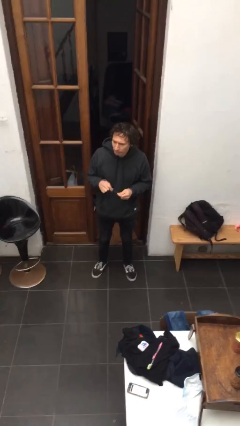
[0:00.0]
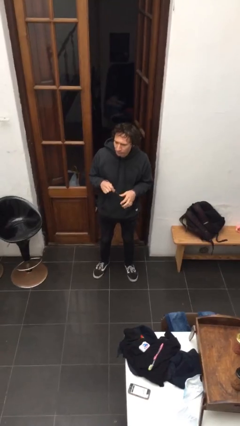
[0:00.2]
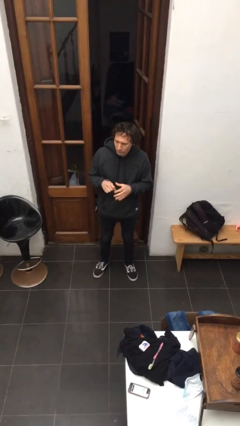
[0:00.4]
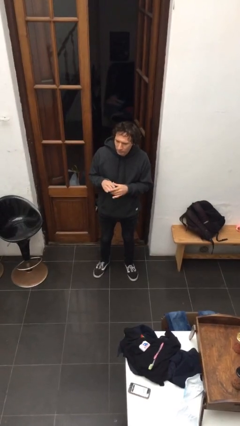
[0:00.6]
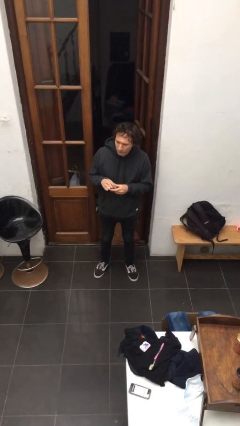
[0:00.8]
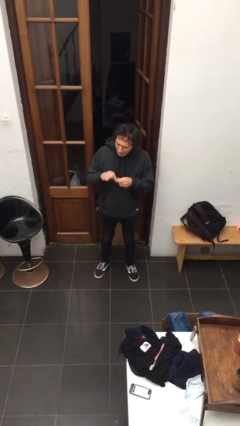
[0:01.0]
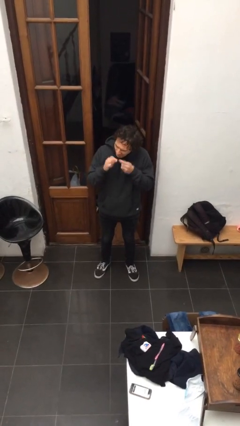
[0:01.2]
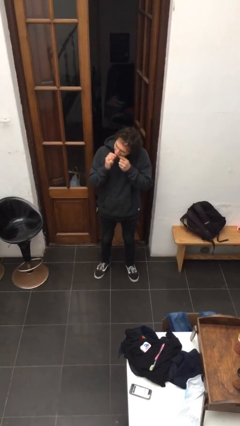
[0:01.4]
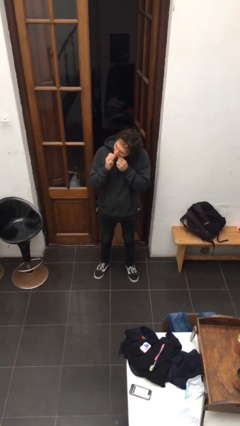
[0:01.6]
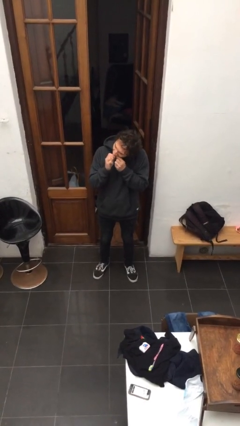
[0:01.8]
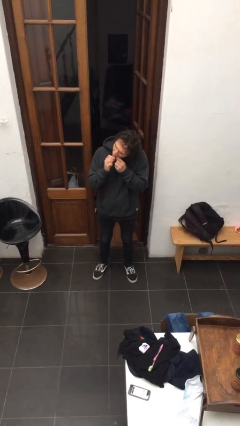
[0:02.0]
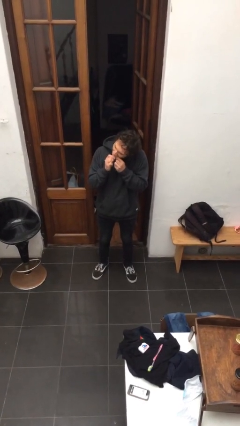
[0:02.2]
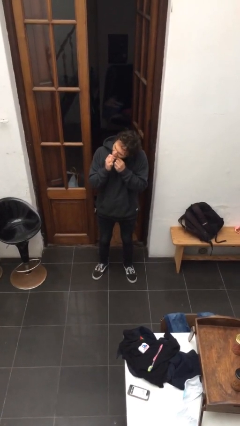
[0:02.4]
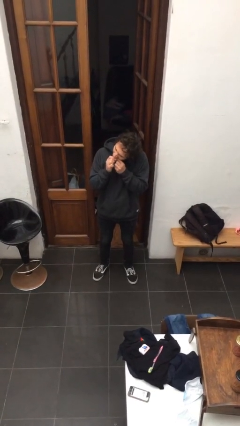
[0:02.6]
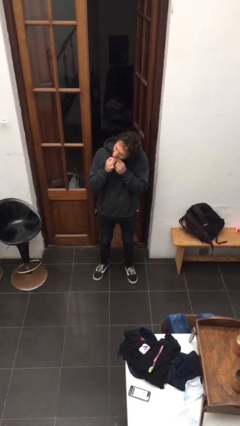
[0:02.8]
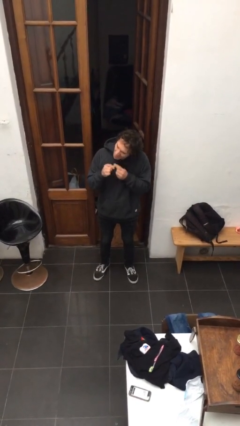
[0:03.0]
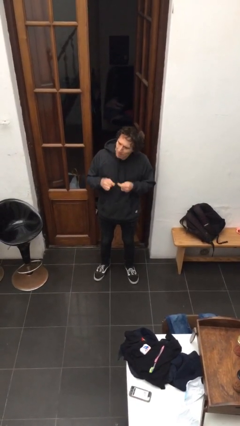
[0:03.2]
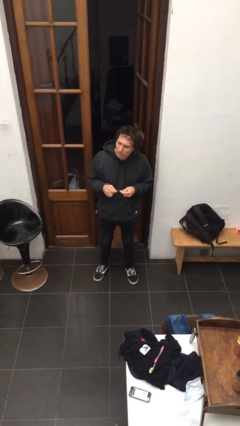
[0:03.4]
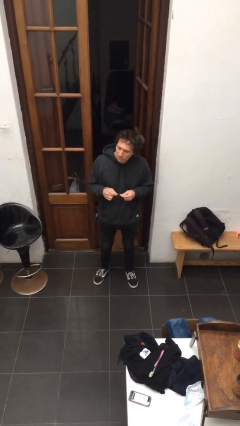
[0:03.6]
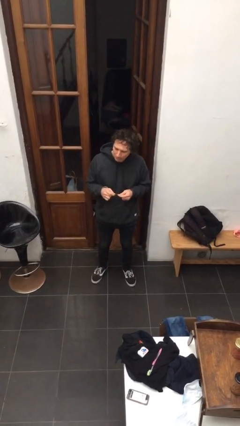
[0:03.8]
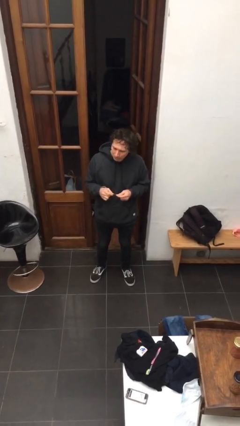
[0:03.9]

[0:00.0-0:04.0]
person flosses

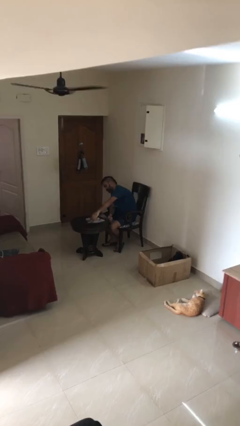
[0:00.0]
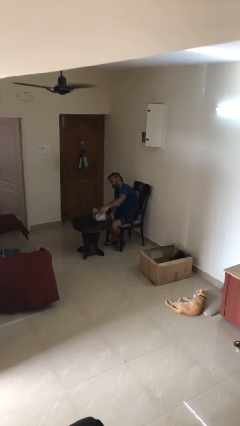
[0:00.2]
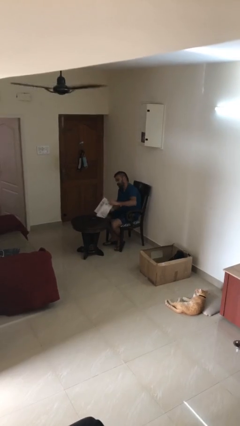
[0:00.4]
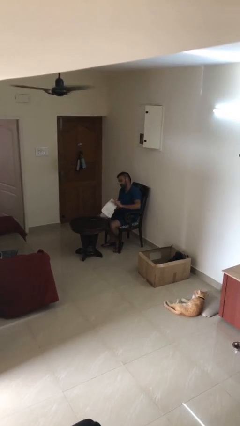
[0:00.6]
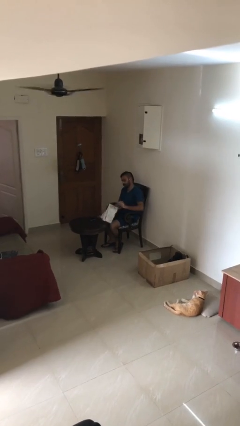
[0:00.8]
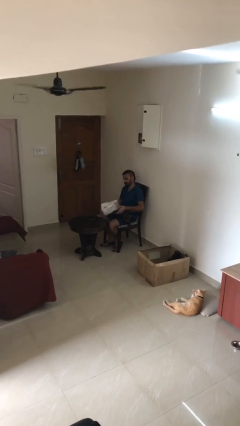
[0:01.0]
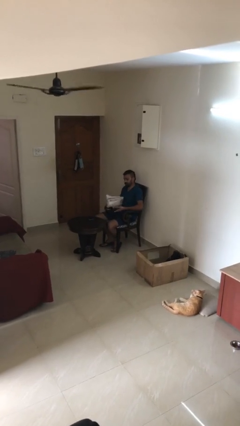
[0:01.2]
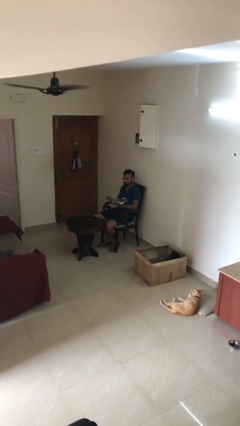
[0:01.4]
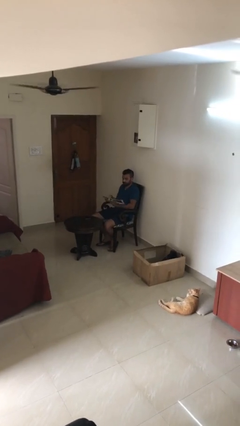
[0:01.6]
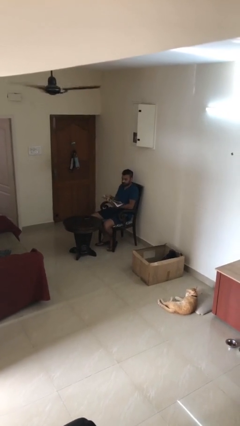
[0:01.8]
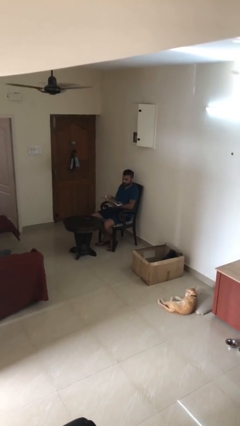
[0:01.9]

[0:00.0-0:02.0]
person picks up object from table

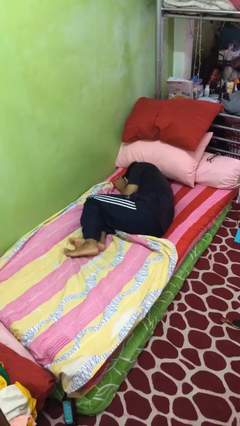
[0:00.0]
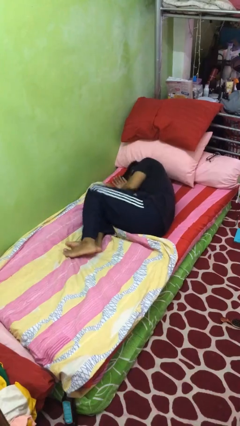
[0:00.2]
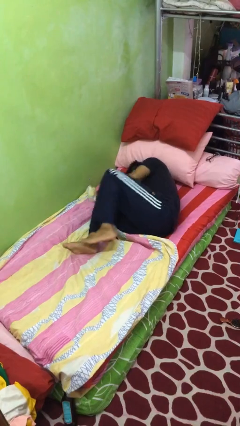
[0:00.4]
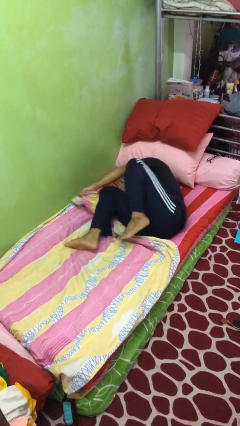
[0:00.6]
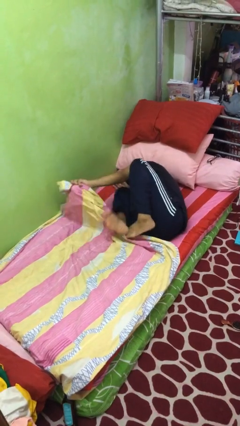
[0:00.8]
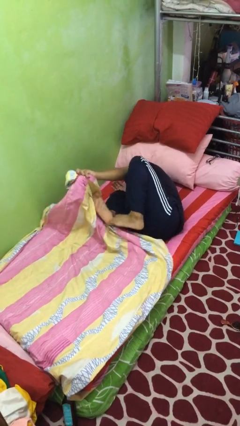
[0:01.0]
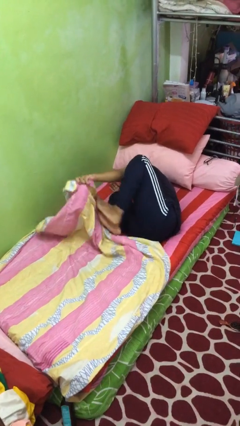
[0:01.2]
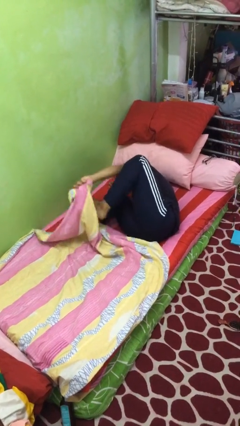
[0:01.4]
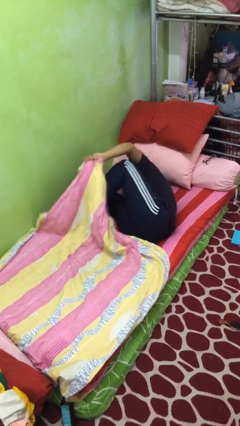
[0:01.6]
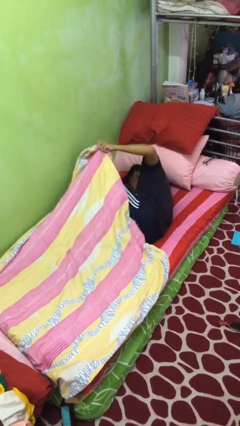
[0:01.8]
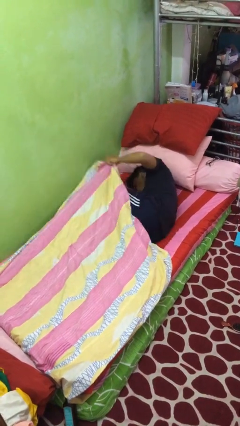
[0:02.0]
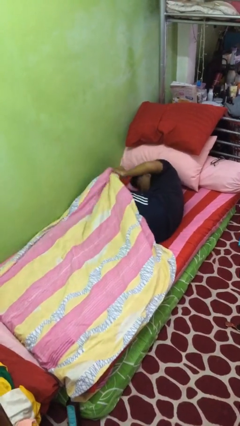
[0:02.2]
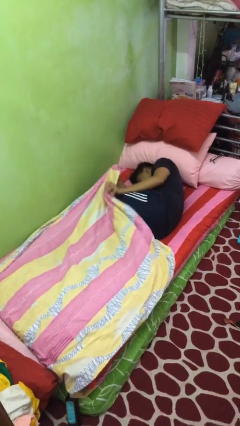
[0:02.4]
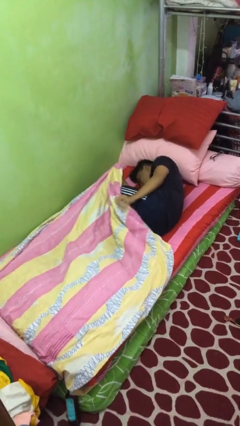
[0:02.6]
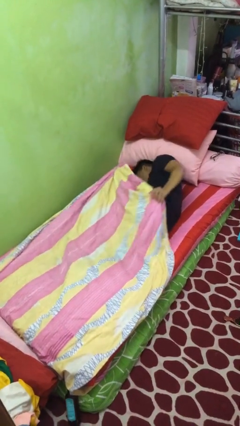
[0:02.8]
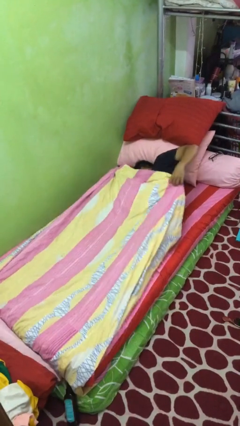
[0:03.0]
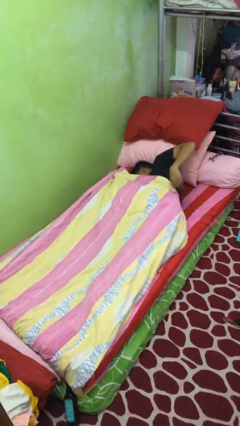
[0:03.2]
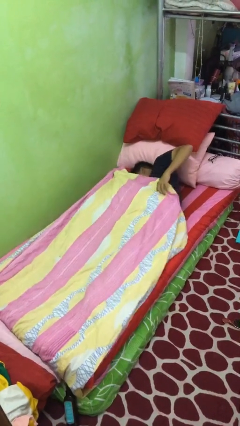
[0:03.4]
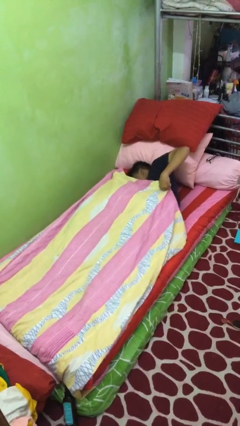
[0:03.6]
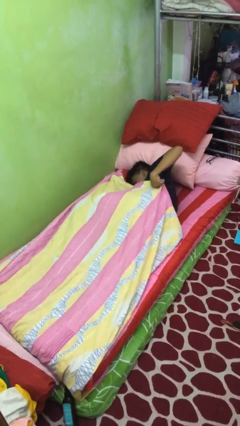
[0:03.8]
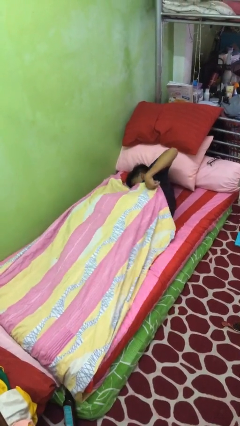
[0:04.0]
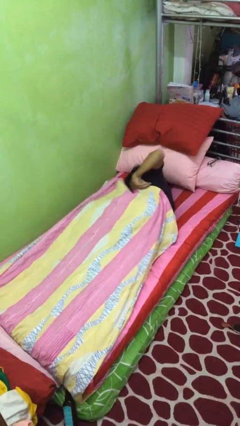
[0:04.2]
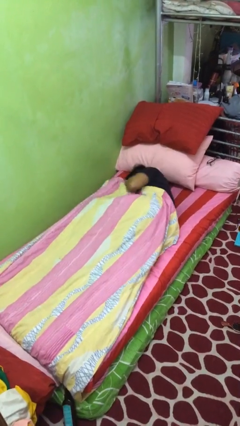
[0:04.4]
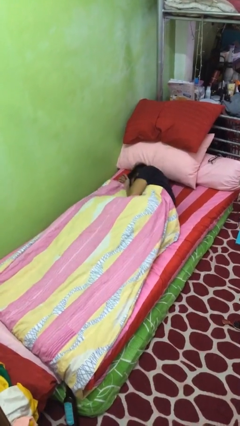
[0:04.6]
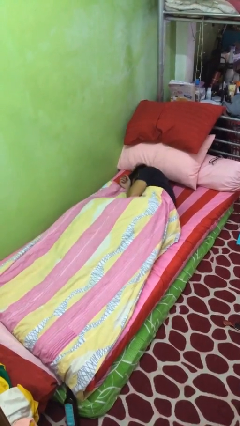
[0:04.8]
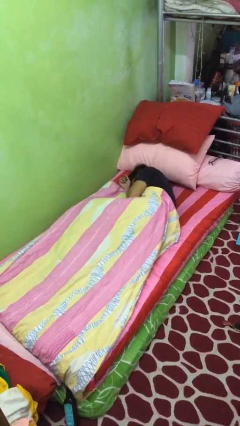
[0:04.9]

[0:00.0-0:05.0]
person covers with bedsheets

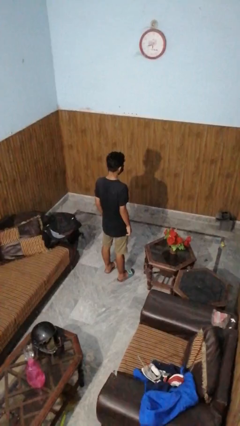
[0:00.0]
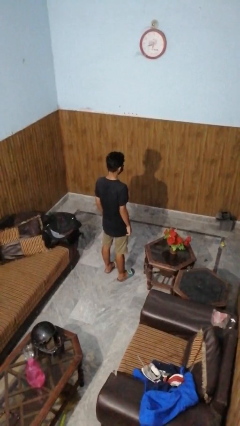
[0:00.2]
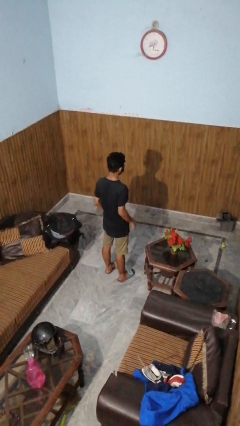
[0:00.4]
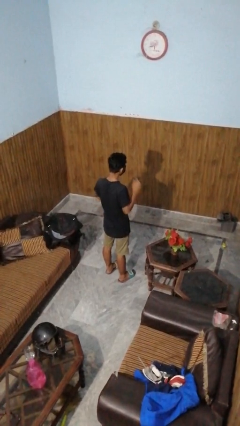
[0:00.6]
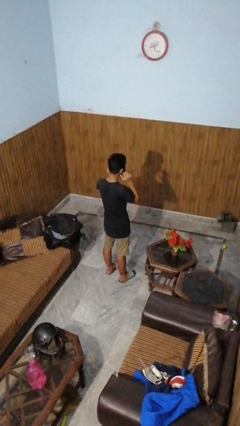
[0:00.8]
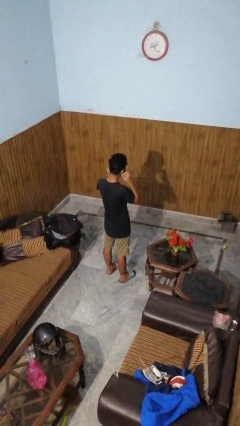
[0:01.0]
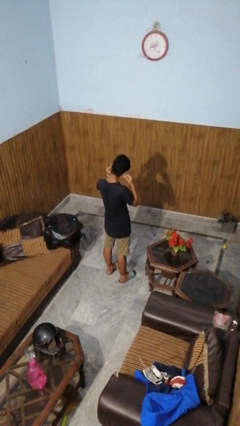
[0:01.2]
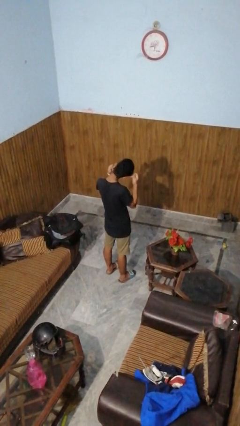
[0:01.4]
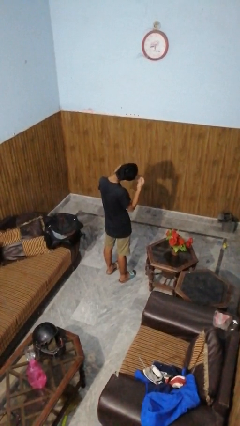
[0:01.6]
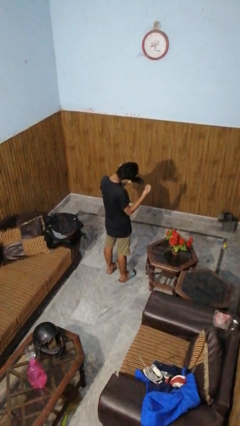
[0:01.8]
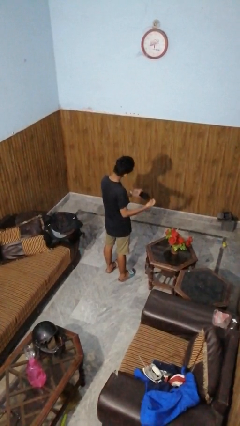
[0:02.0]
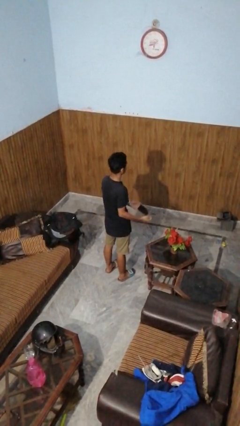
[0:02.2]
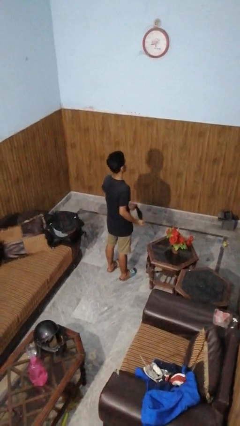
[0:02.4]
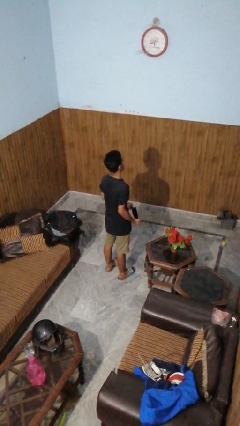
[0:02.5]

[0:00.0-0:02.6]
person takes off facemask

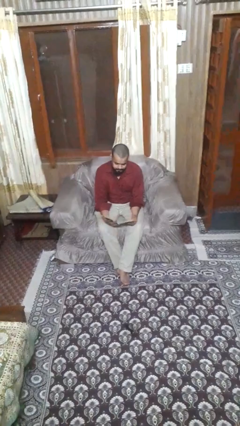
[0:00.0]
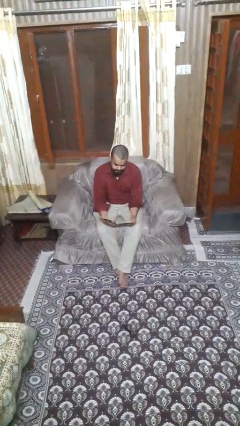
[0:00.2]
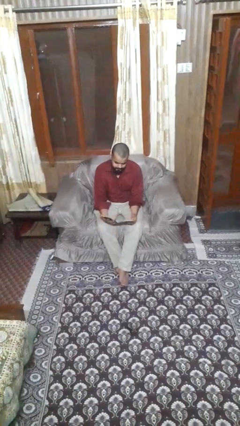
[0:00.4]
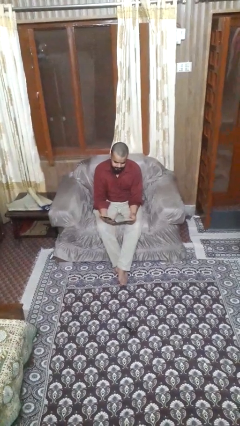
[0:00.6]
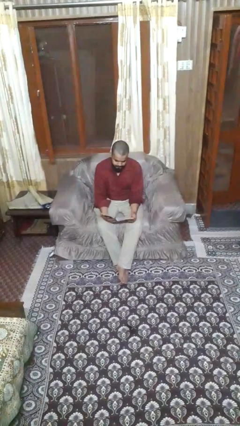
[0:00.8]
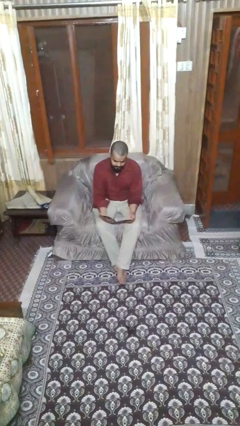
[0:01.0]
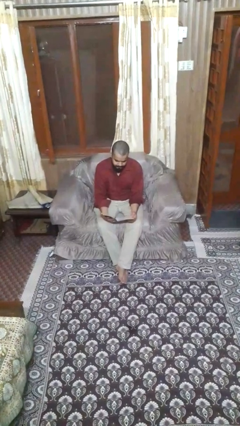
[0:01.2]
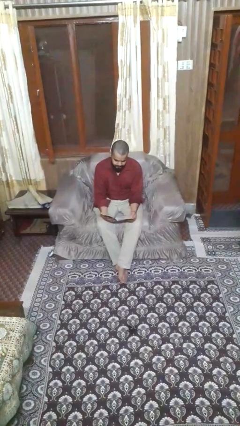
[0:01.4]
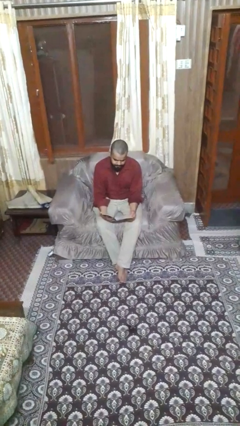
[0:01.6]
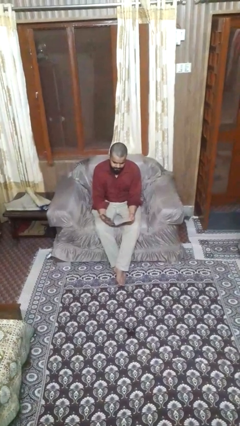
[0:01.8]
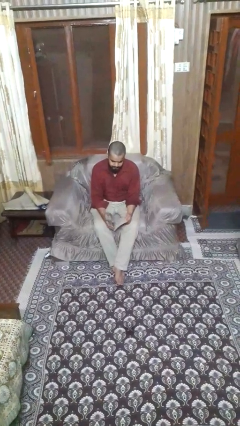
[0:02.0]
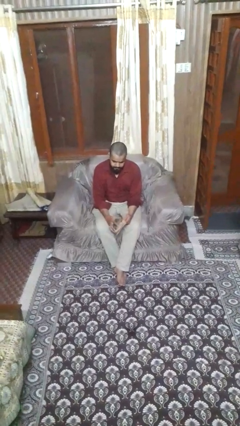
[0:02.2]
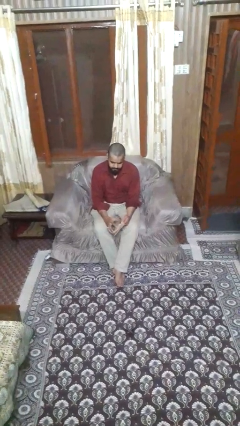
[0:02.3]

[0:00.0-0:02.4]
person reads magazine

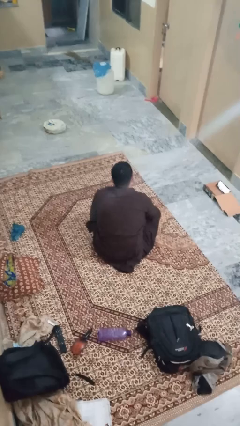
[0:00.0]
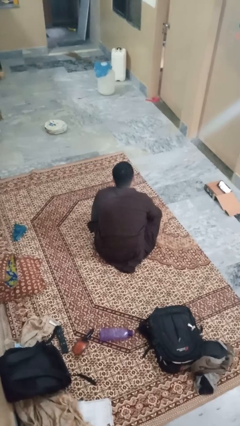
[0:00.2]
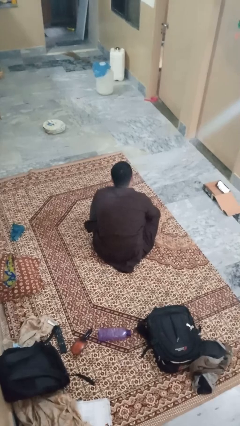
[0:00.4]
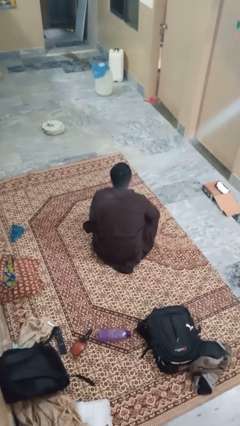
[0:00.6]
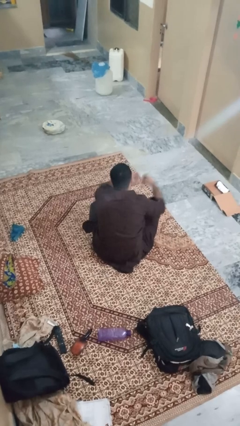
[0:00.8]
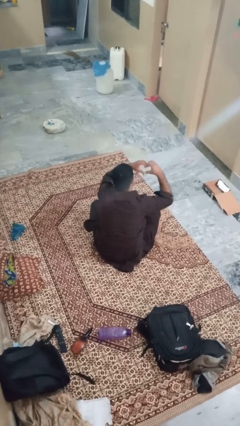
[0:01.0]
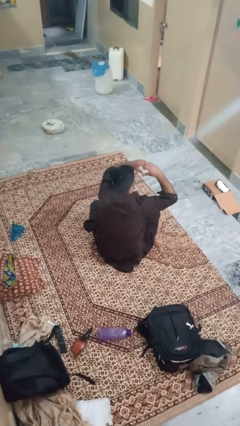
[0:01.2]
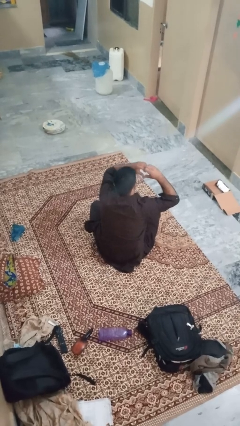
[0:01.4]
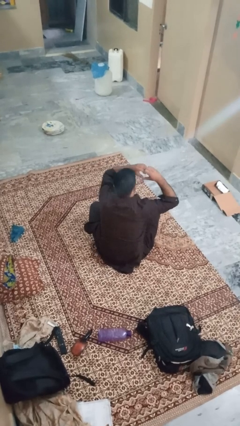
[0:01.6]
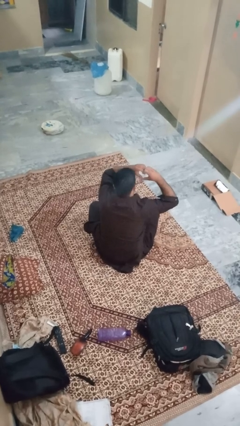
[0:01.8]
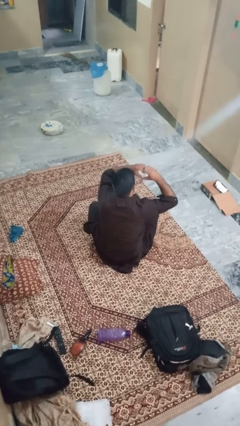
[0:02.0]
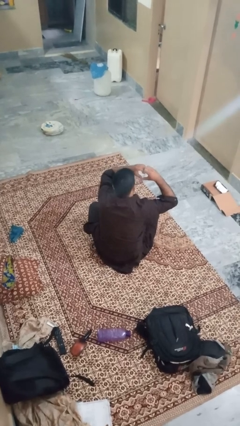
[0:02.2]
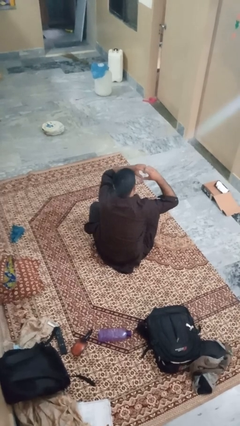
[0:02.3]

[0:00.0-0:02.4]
person gestures heart
